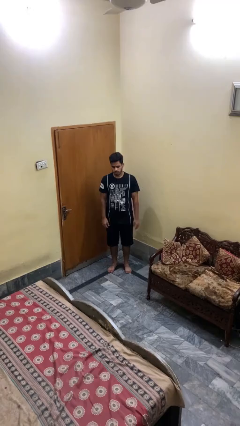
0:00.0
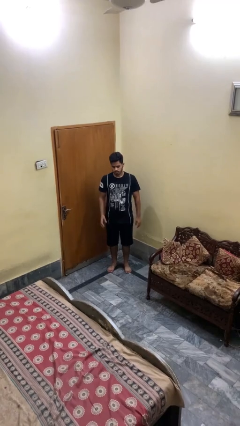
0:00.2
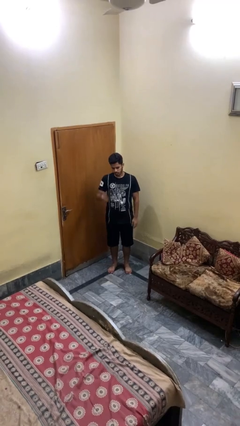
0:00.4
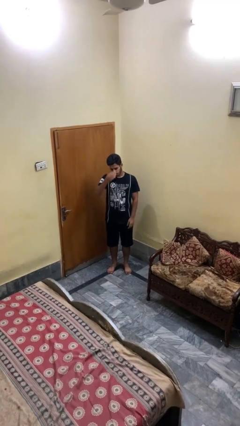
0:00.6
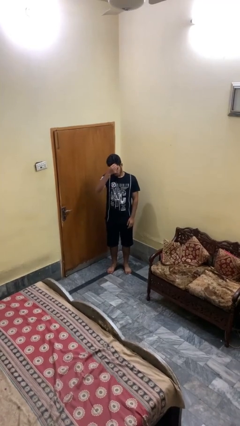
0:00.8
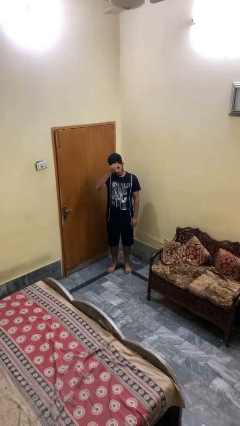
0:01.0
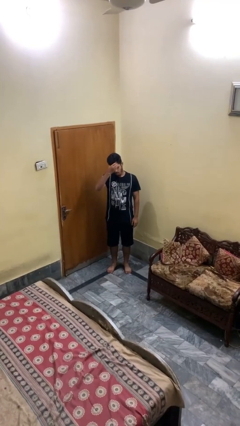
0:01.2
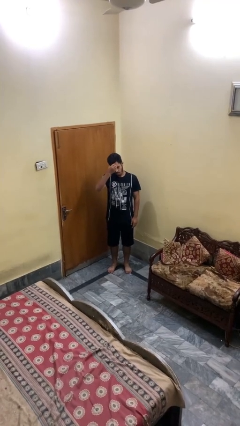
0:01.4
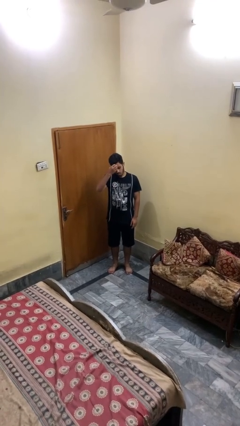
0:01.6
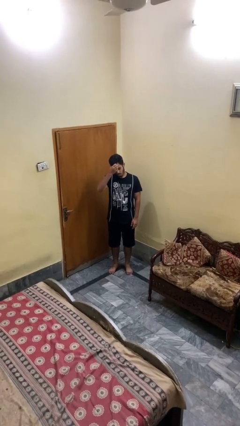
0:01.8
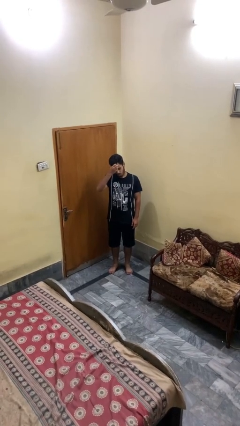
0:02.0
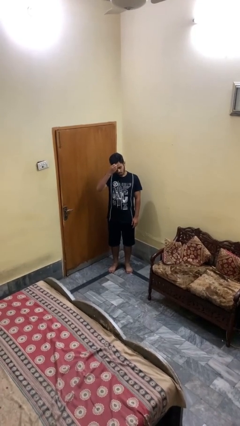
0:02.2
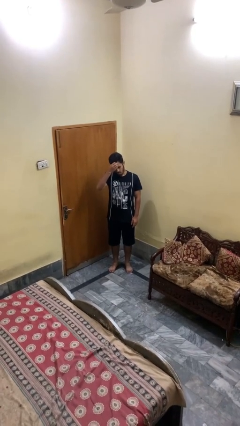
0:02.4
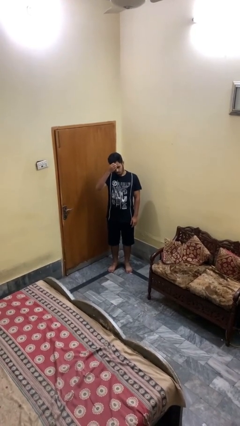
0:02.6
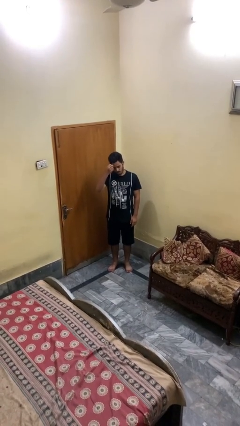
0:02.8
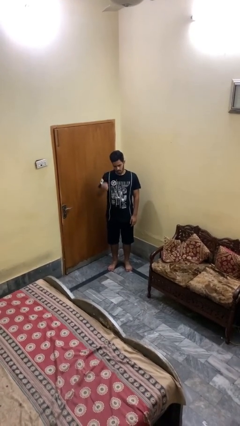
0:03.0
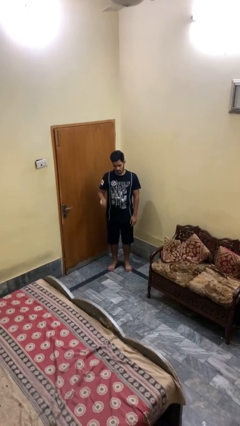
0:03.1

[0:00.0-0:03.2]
person scratches face

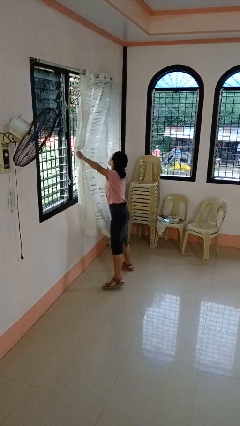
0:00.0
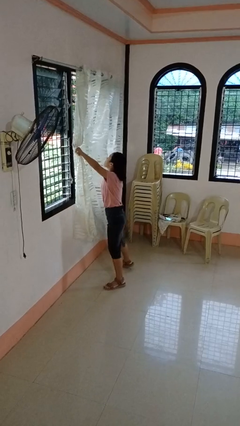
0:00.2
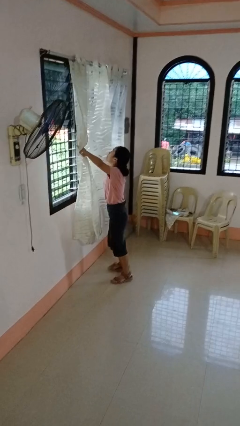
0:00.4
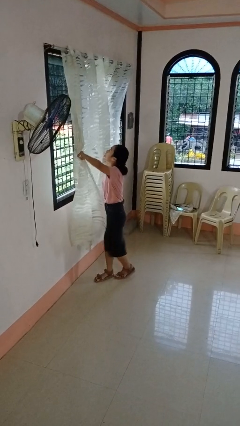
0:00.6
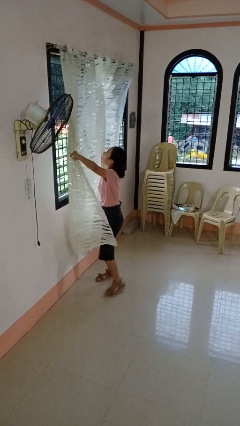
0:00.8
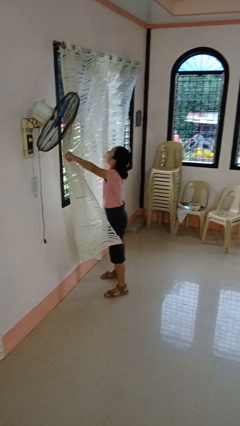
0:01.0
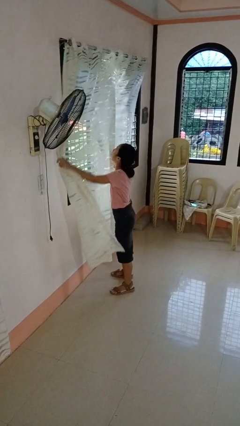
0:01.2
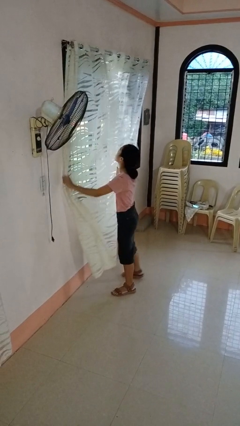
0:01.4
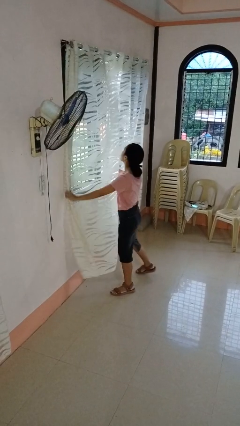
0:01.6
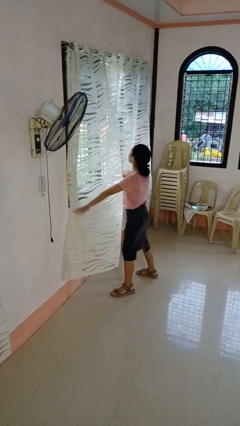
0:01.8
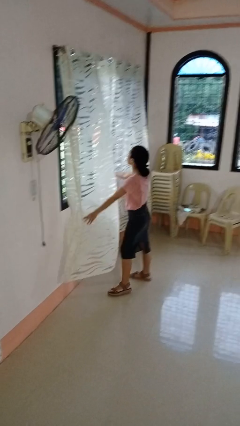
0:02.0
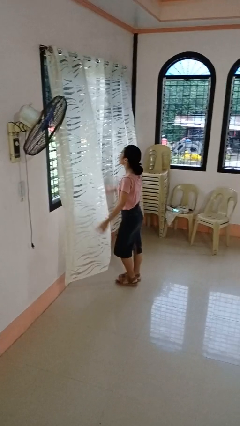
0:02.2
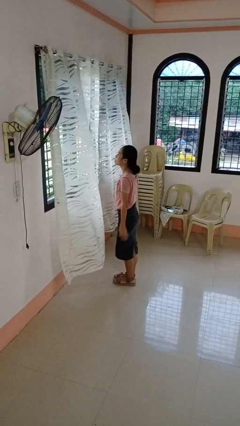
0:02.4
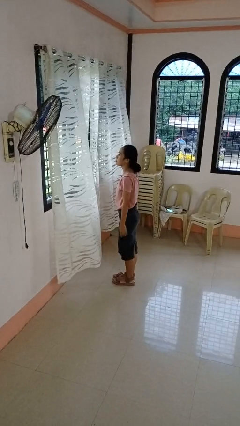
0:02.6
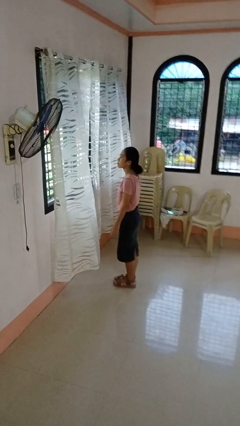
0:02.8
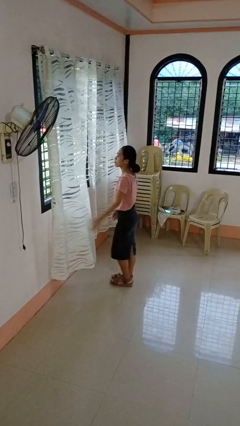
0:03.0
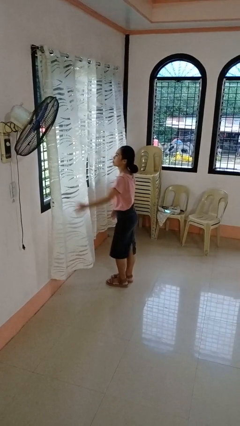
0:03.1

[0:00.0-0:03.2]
person closes curtains

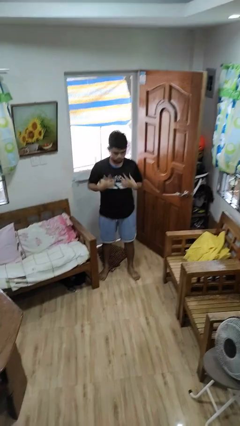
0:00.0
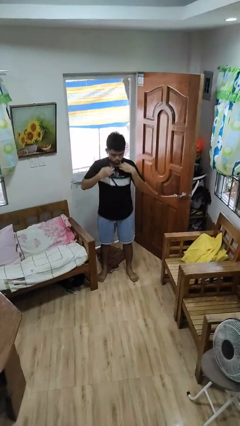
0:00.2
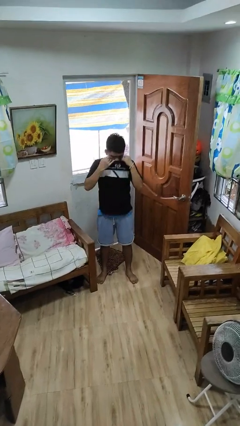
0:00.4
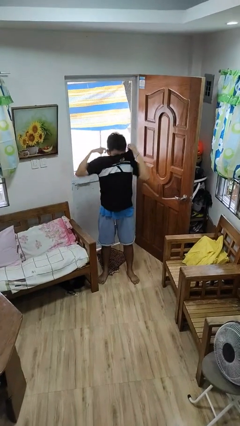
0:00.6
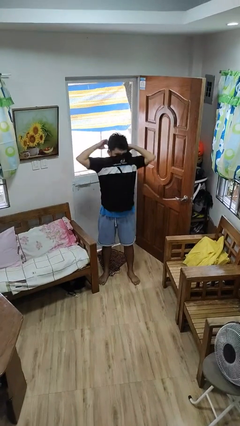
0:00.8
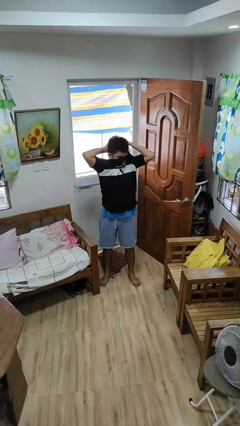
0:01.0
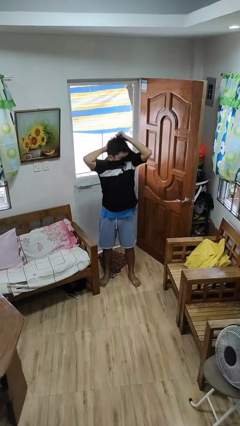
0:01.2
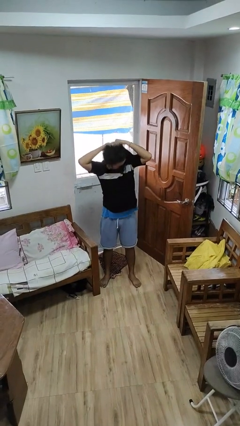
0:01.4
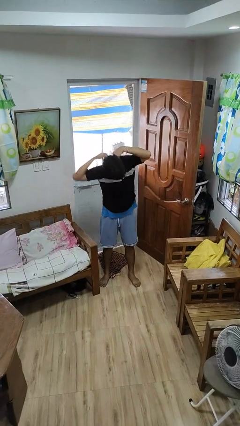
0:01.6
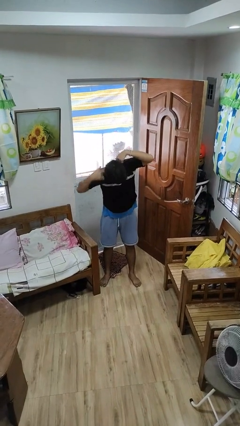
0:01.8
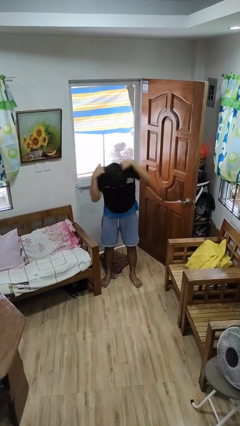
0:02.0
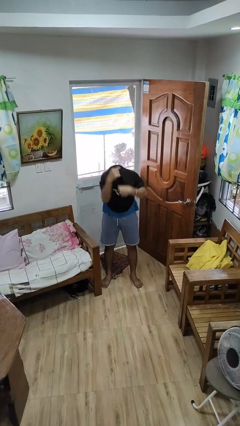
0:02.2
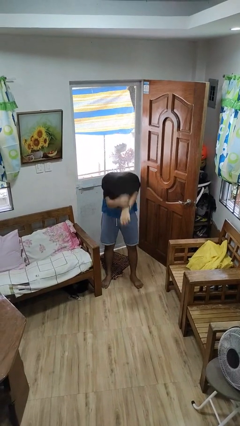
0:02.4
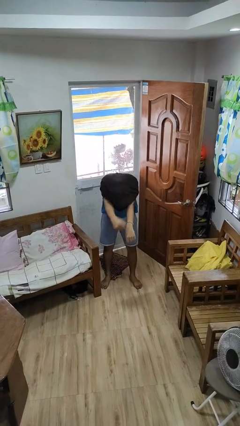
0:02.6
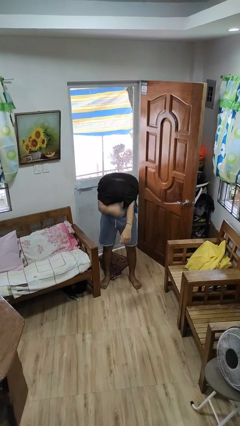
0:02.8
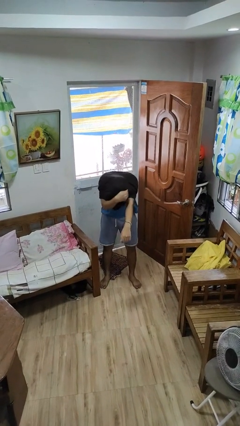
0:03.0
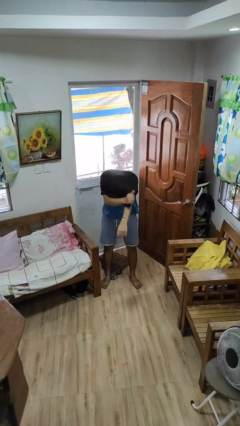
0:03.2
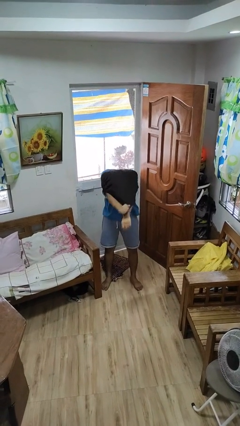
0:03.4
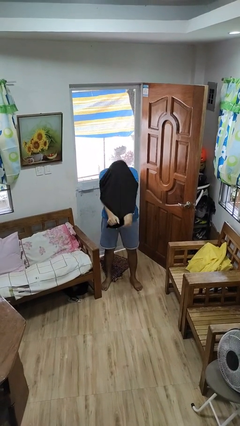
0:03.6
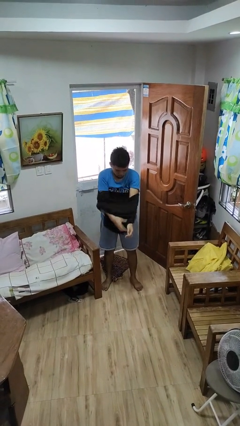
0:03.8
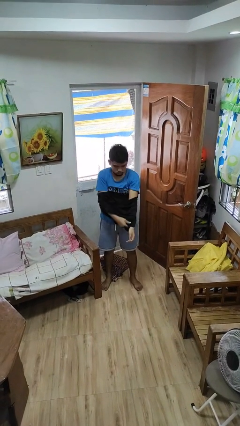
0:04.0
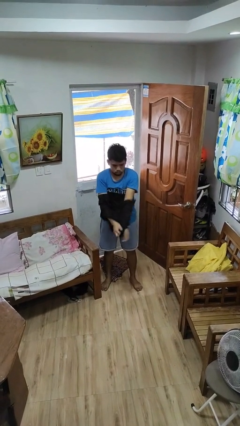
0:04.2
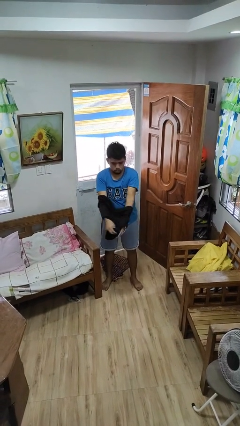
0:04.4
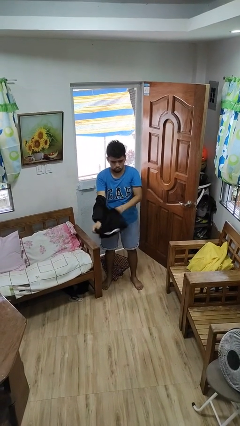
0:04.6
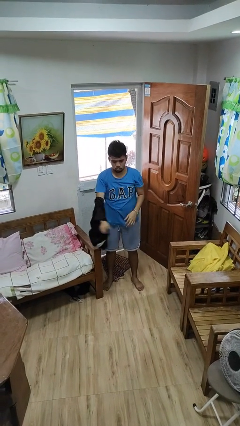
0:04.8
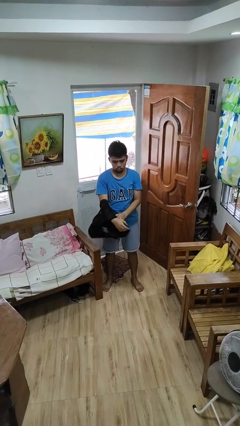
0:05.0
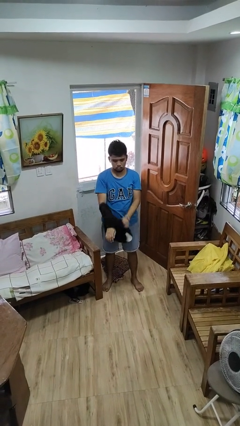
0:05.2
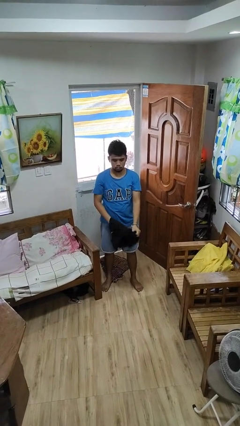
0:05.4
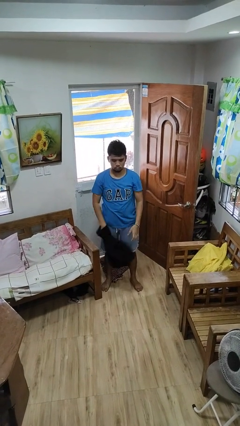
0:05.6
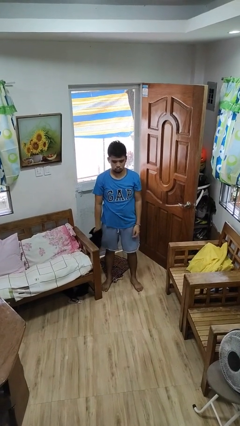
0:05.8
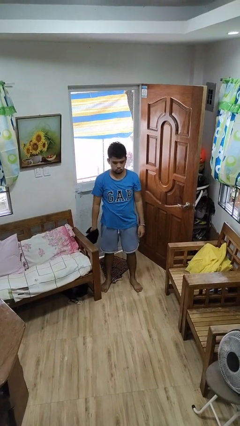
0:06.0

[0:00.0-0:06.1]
person takes off shirt

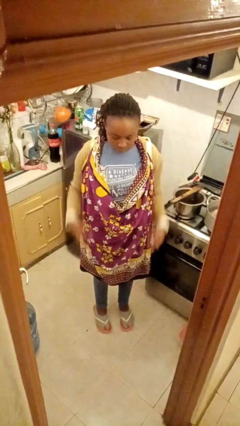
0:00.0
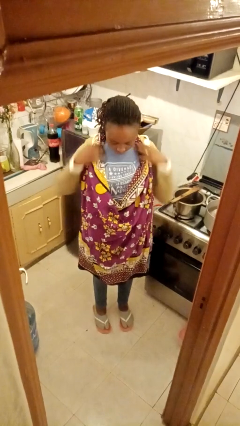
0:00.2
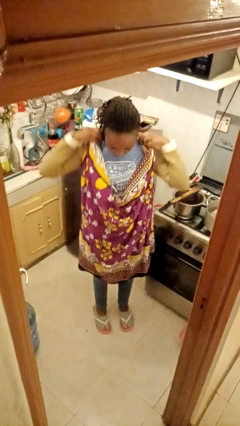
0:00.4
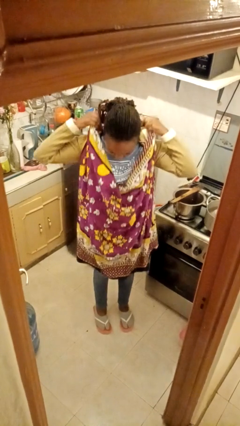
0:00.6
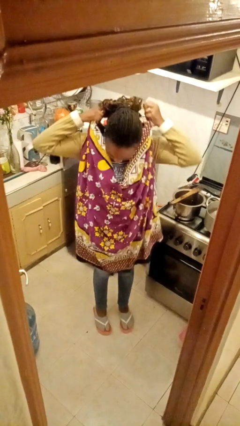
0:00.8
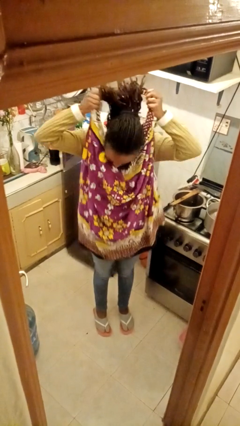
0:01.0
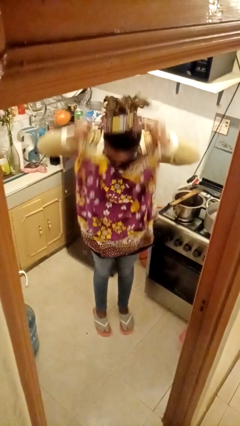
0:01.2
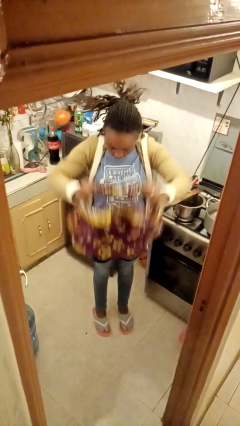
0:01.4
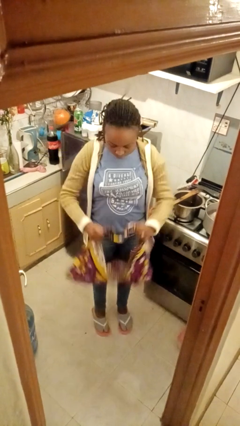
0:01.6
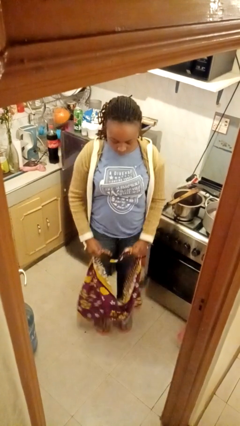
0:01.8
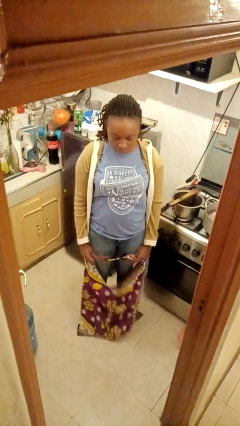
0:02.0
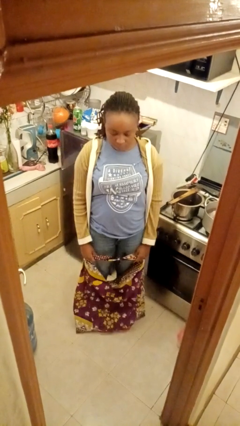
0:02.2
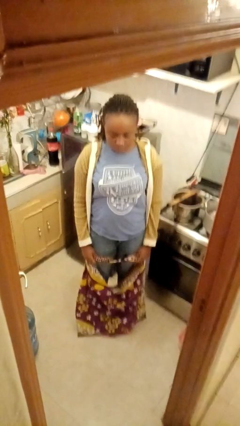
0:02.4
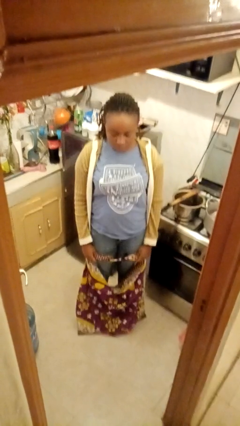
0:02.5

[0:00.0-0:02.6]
person takes off apron

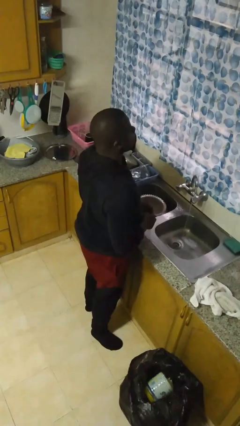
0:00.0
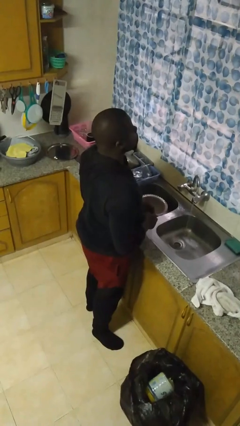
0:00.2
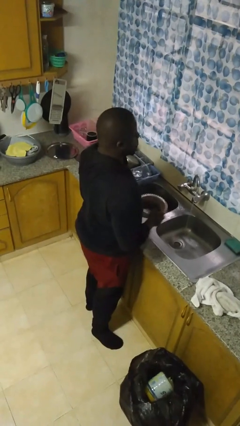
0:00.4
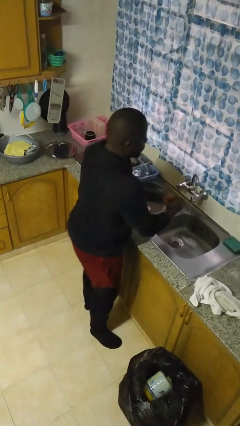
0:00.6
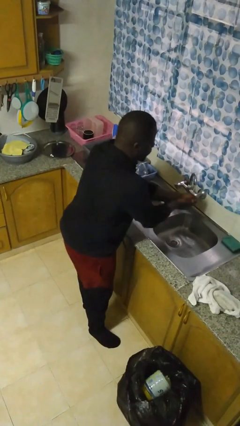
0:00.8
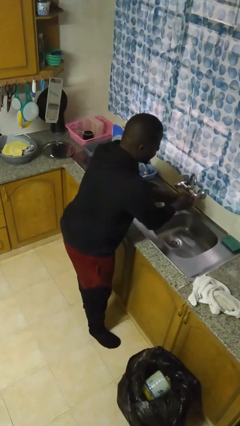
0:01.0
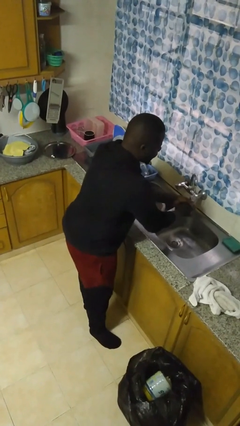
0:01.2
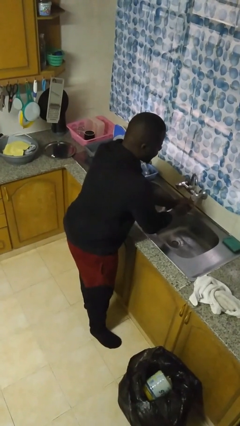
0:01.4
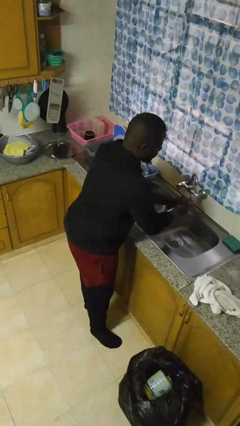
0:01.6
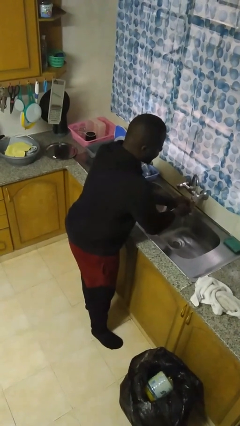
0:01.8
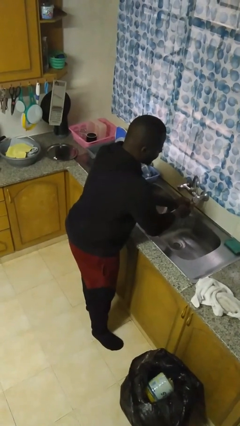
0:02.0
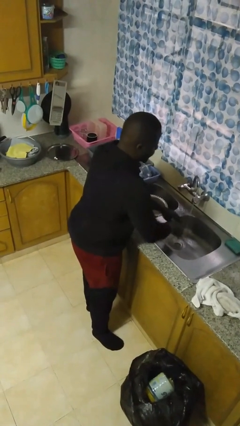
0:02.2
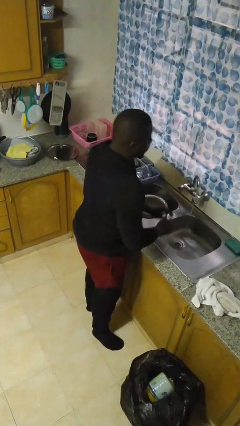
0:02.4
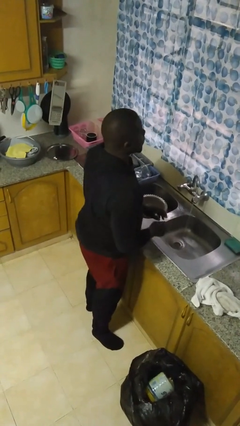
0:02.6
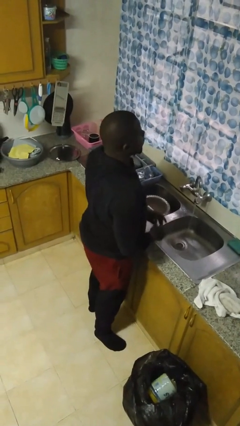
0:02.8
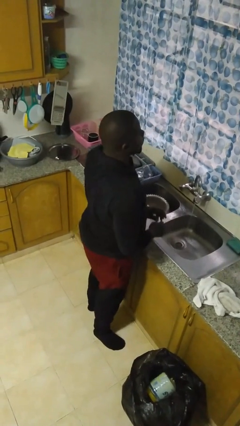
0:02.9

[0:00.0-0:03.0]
person washes hands
